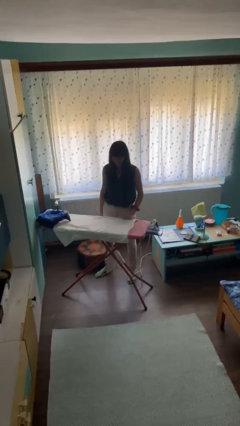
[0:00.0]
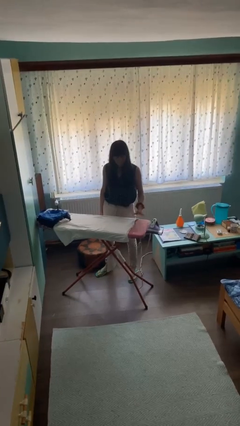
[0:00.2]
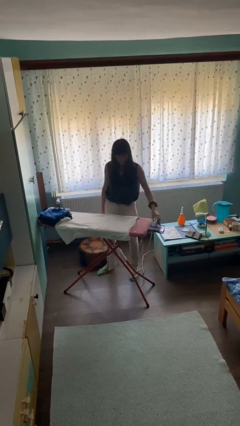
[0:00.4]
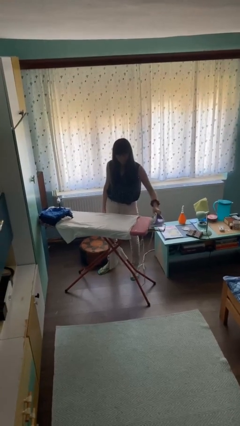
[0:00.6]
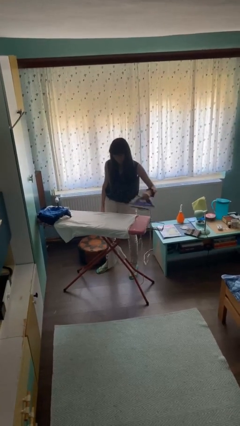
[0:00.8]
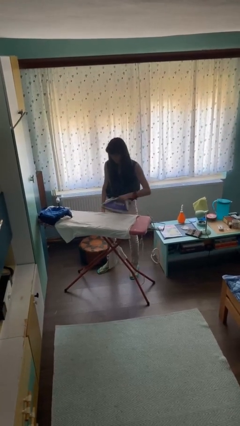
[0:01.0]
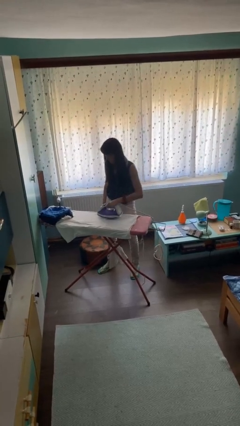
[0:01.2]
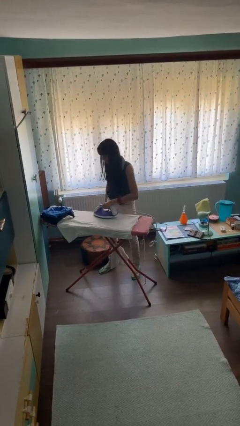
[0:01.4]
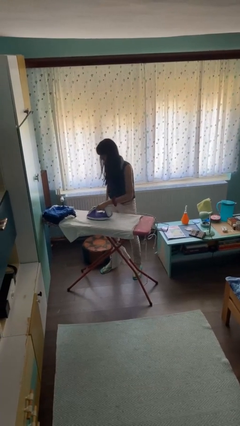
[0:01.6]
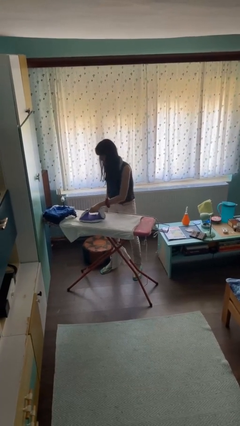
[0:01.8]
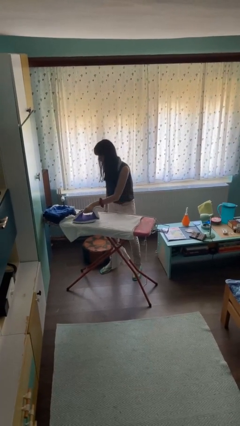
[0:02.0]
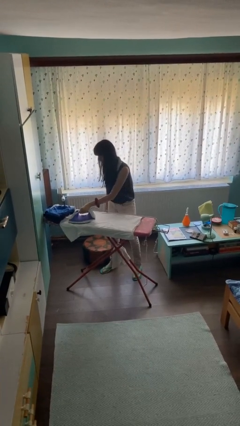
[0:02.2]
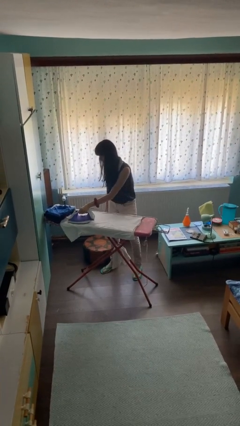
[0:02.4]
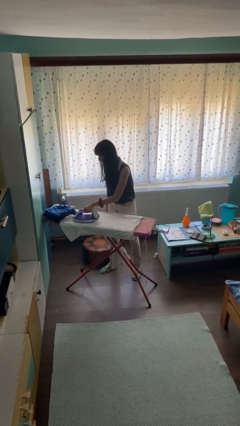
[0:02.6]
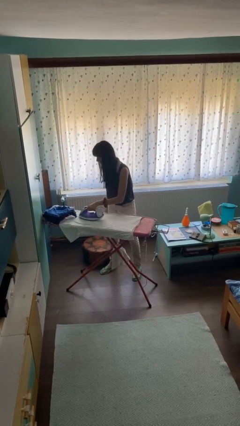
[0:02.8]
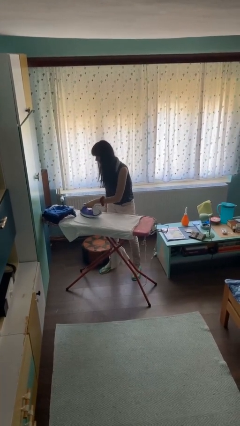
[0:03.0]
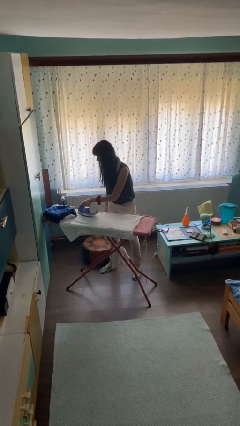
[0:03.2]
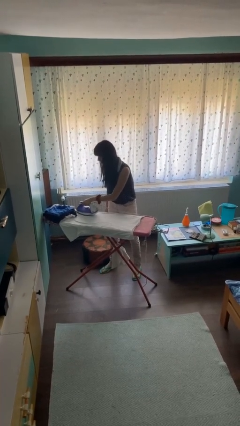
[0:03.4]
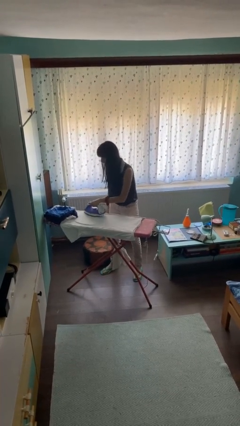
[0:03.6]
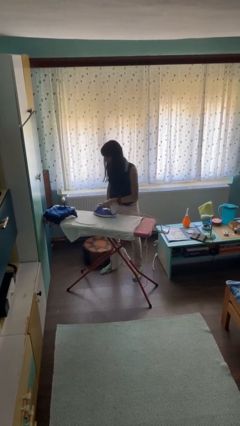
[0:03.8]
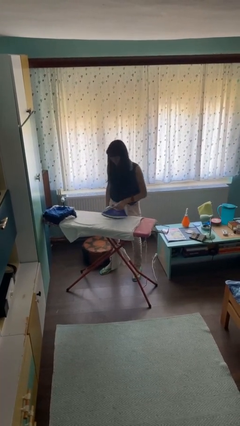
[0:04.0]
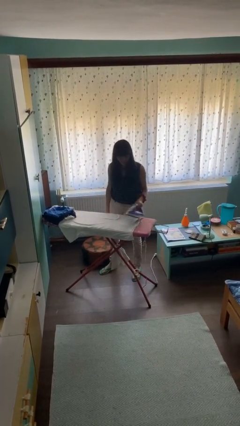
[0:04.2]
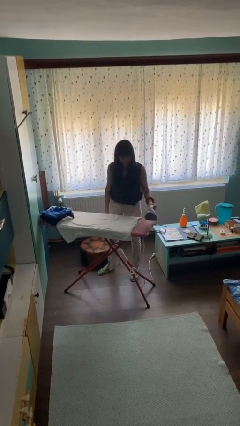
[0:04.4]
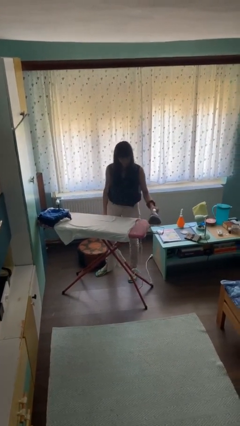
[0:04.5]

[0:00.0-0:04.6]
person irons clothes

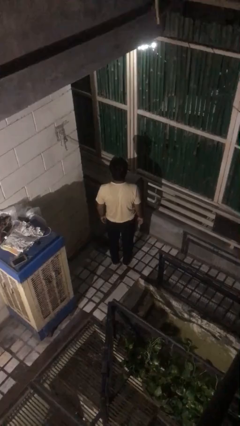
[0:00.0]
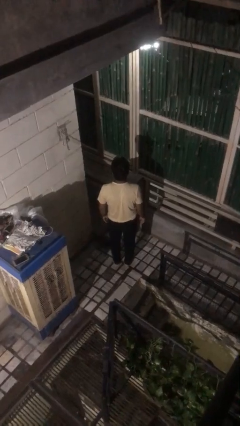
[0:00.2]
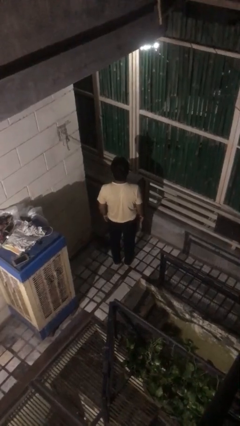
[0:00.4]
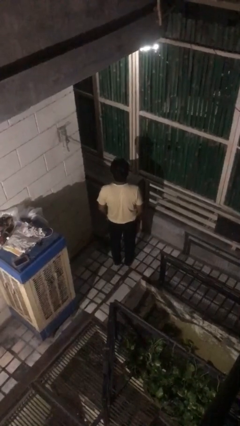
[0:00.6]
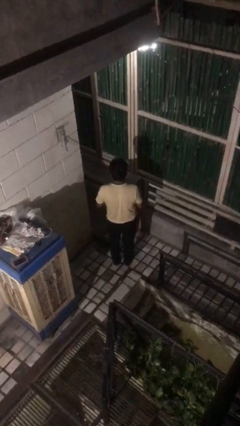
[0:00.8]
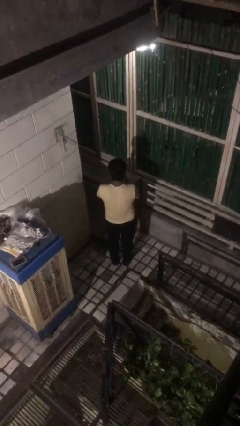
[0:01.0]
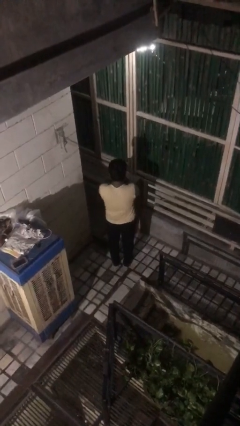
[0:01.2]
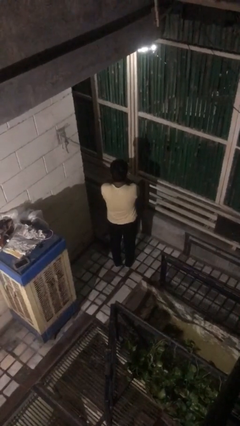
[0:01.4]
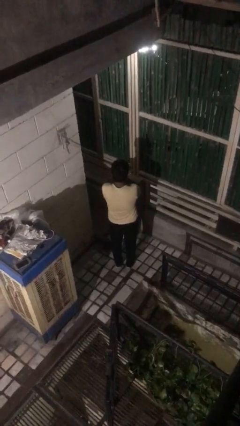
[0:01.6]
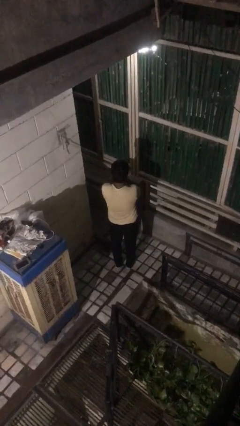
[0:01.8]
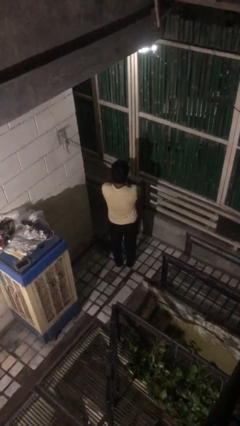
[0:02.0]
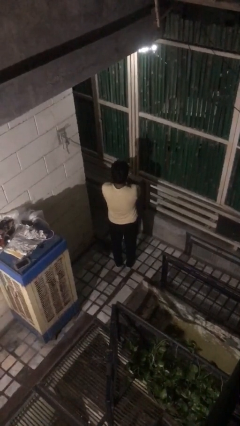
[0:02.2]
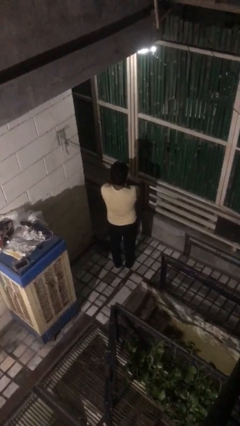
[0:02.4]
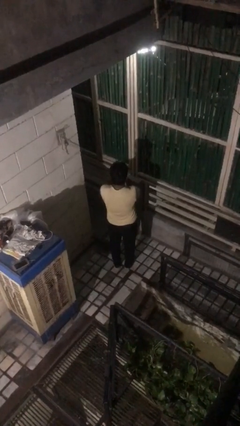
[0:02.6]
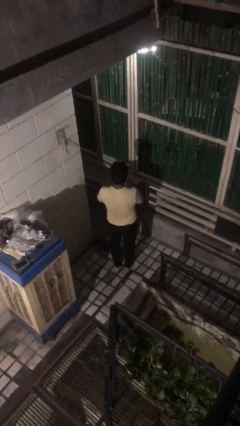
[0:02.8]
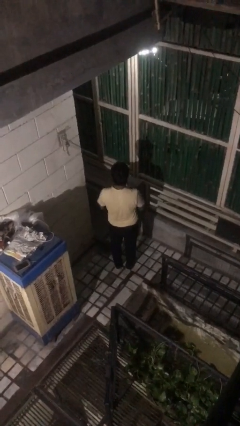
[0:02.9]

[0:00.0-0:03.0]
person covers face with hands

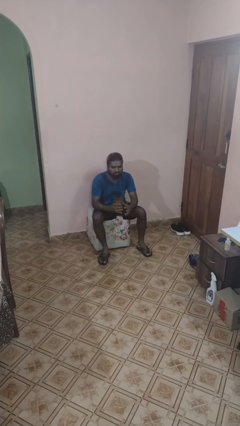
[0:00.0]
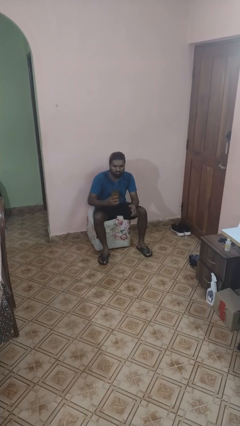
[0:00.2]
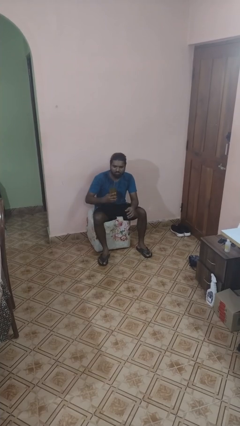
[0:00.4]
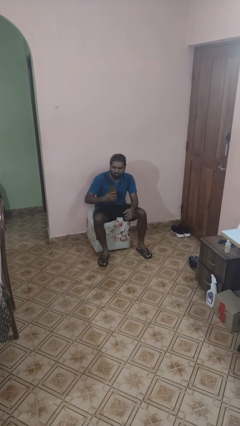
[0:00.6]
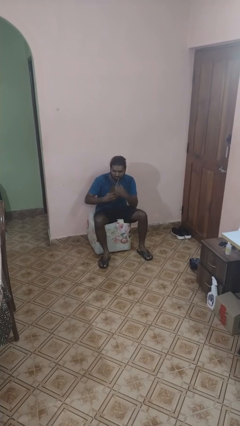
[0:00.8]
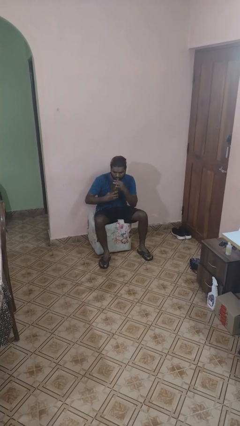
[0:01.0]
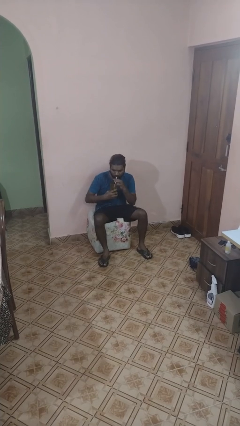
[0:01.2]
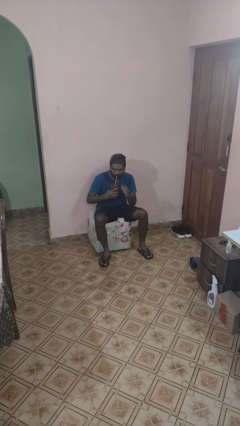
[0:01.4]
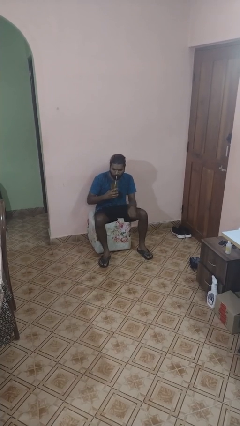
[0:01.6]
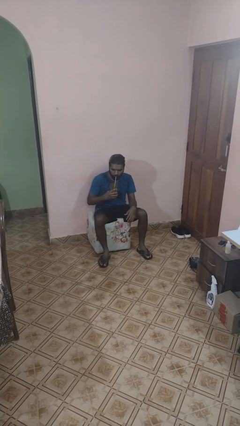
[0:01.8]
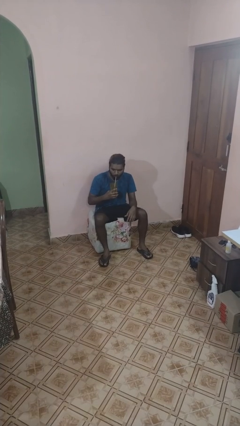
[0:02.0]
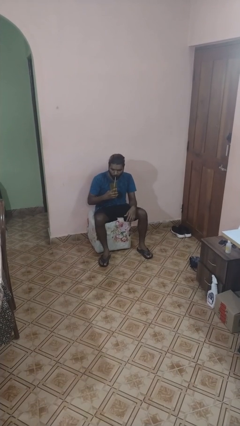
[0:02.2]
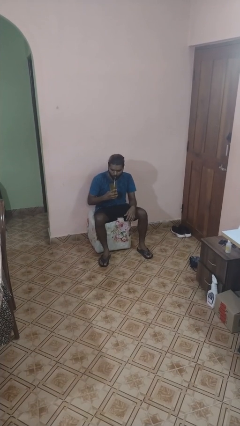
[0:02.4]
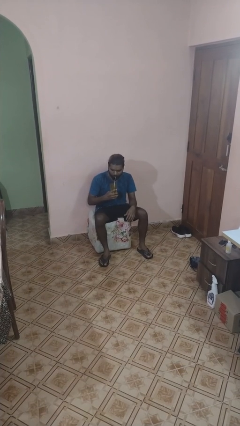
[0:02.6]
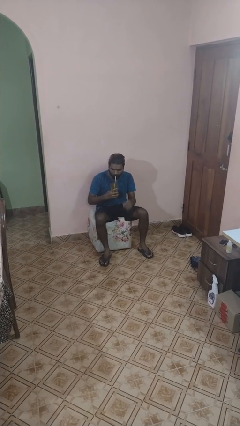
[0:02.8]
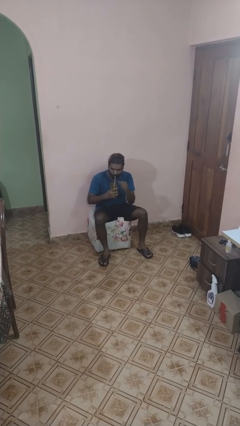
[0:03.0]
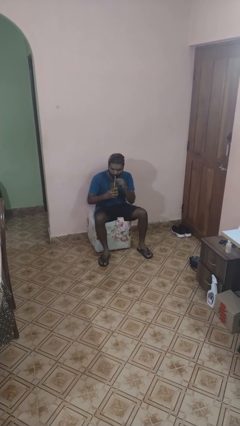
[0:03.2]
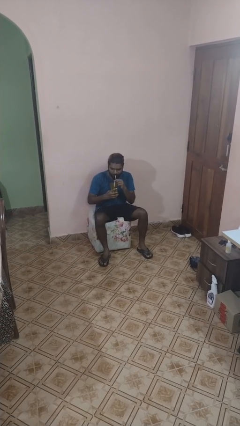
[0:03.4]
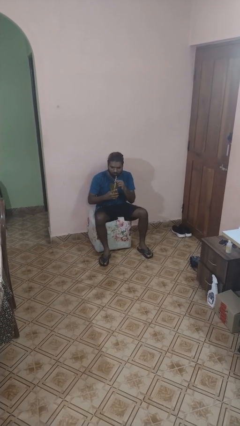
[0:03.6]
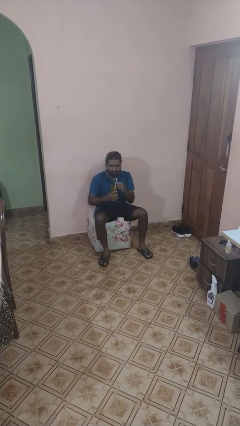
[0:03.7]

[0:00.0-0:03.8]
person drinks from straw

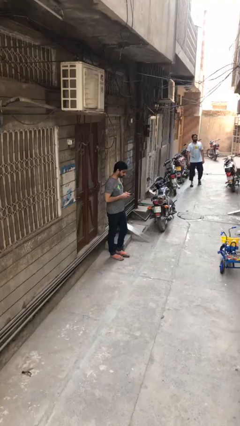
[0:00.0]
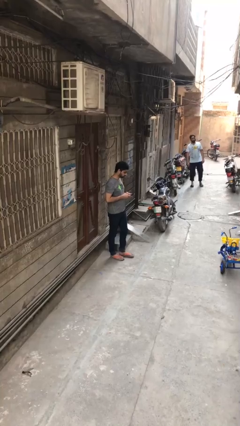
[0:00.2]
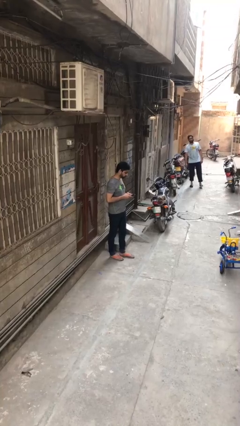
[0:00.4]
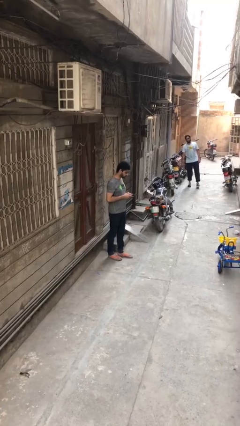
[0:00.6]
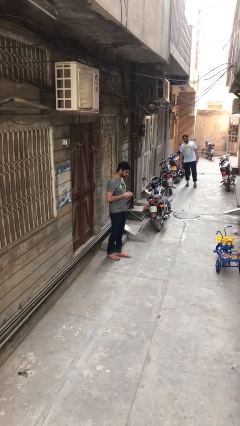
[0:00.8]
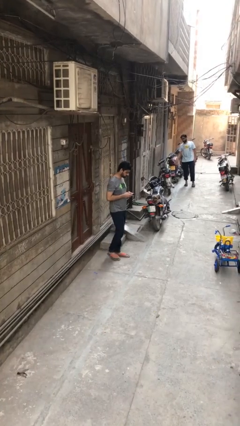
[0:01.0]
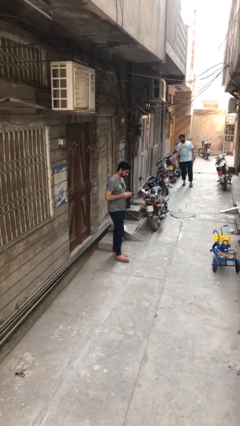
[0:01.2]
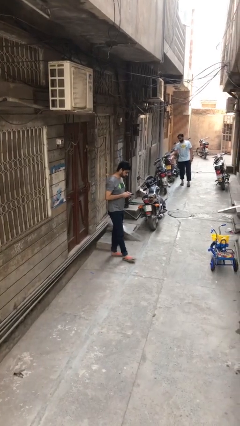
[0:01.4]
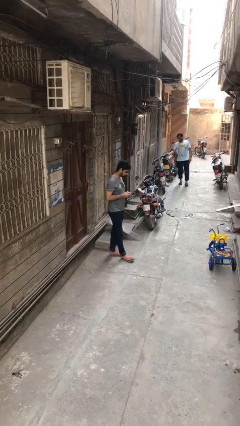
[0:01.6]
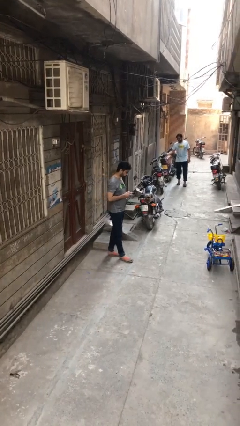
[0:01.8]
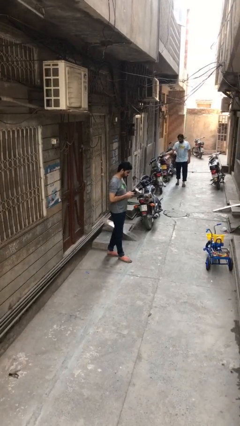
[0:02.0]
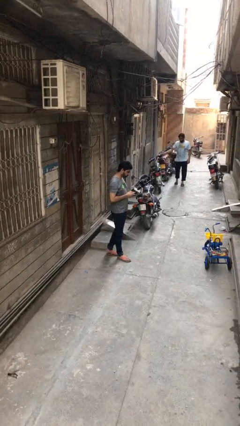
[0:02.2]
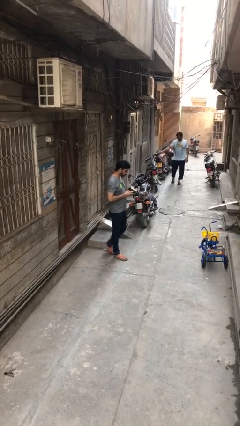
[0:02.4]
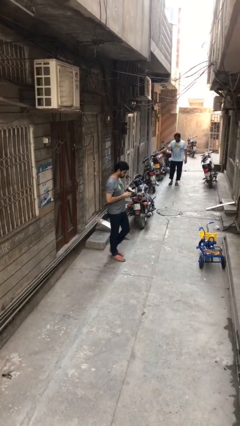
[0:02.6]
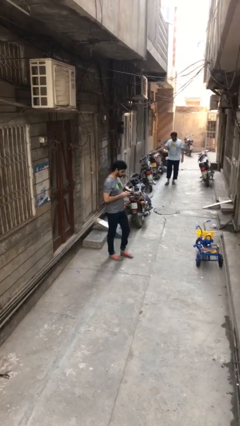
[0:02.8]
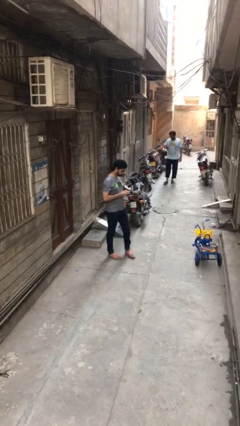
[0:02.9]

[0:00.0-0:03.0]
person texts on phone

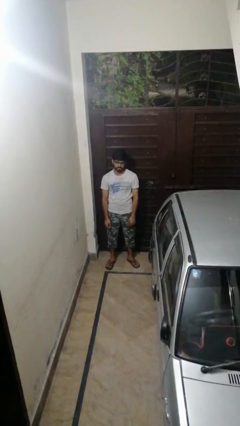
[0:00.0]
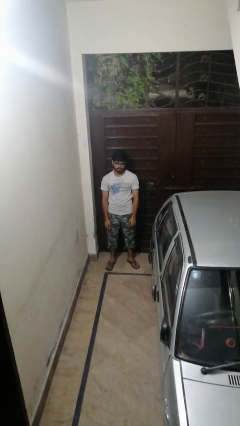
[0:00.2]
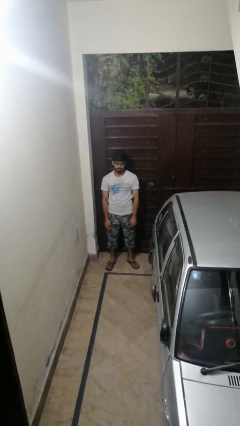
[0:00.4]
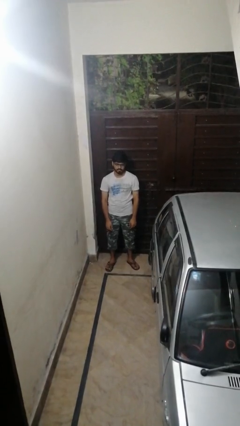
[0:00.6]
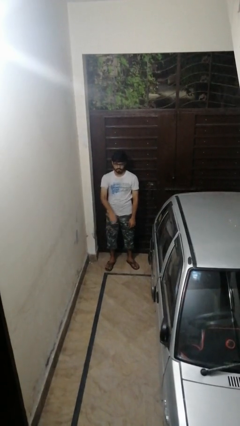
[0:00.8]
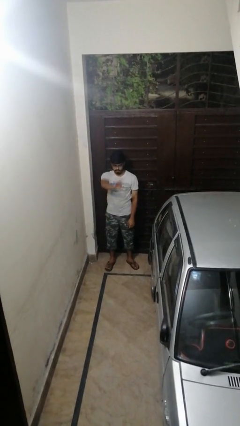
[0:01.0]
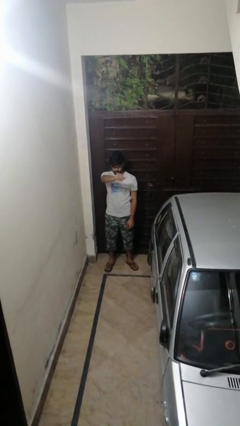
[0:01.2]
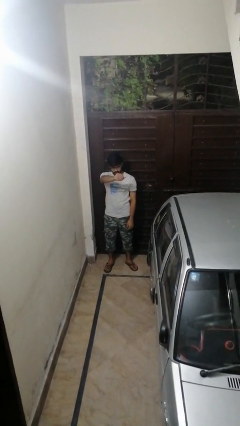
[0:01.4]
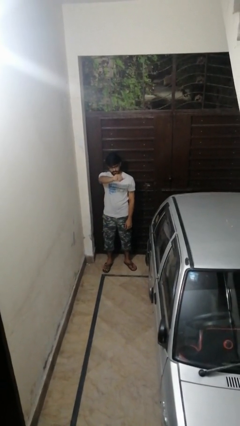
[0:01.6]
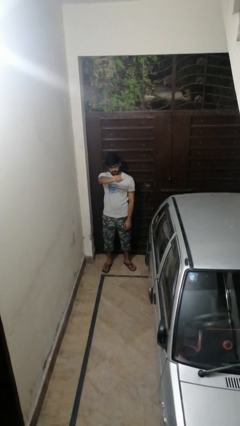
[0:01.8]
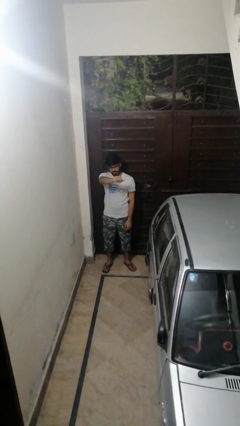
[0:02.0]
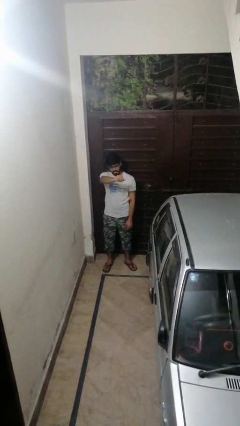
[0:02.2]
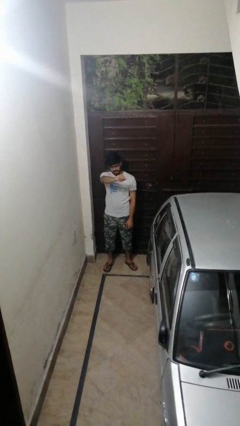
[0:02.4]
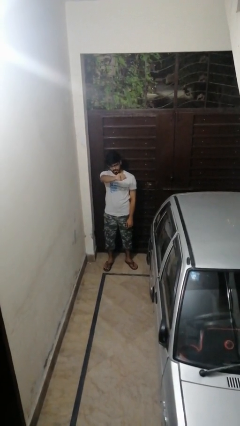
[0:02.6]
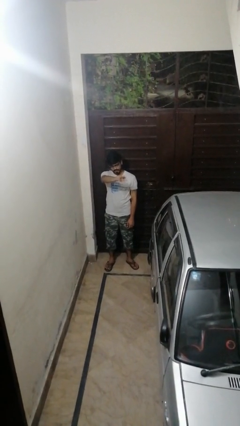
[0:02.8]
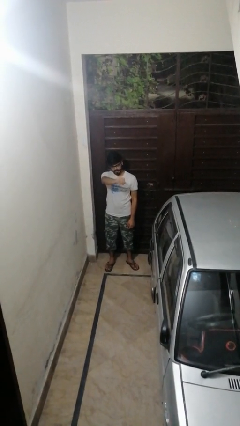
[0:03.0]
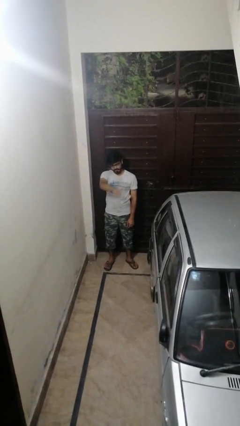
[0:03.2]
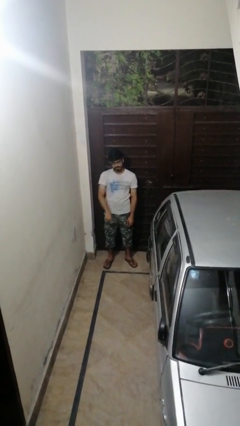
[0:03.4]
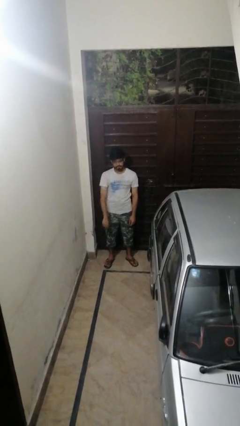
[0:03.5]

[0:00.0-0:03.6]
person gestures come here
